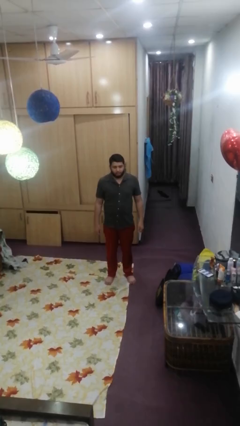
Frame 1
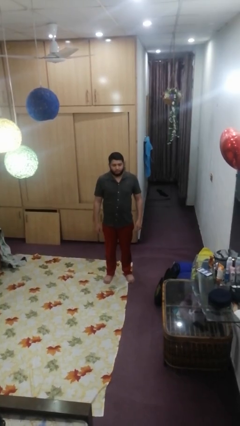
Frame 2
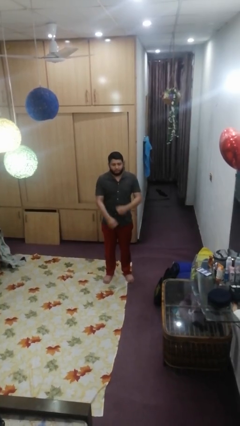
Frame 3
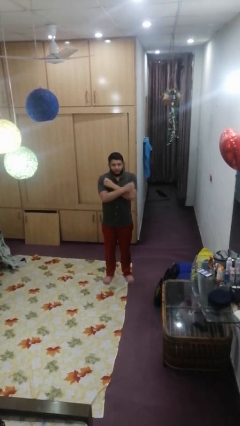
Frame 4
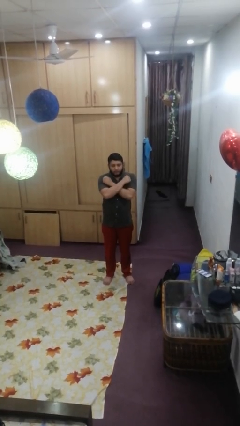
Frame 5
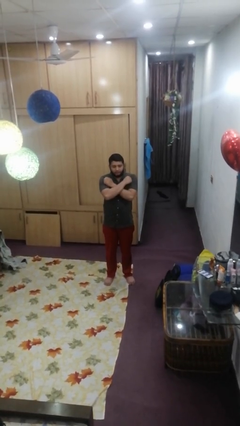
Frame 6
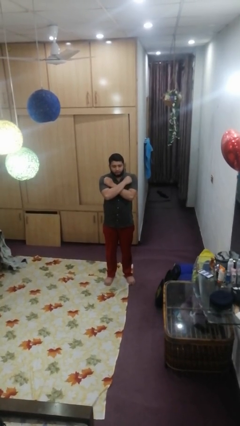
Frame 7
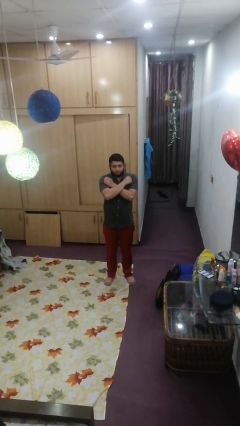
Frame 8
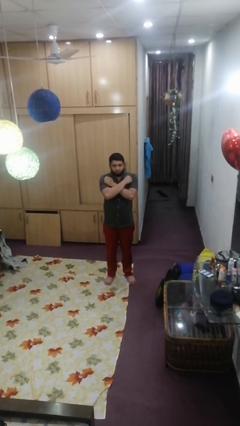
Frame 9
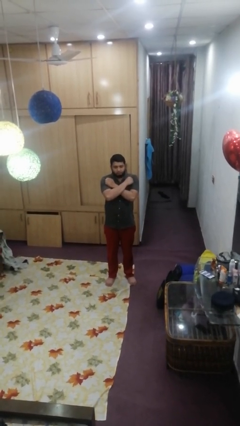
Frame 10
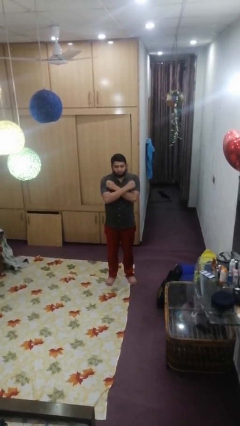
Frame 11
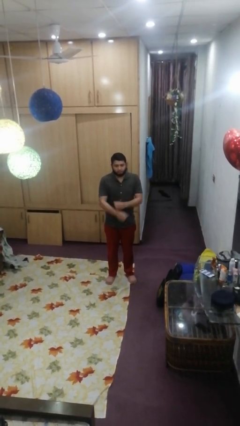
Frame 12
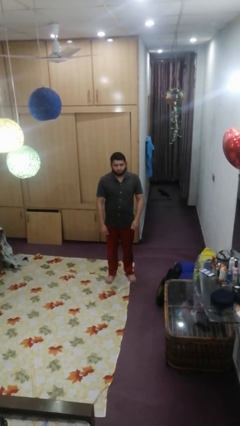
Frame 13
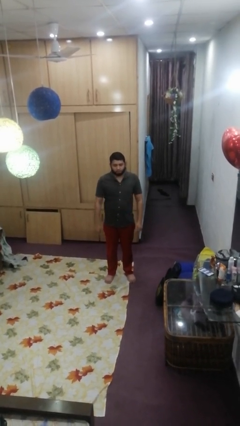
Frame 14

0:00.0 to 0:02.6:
person crosses arms

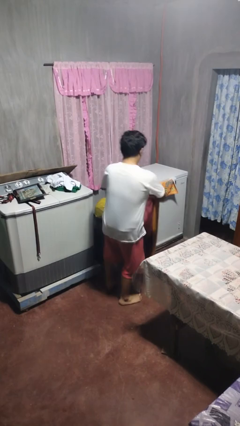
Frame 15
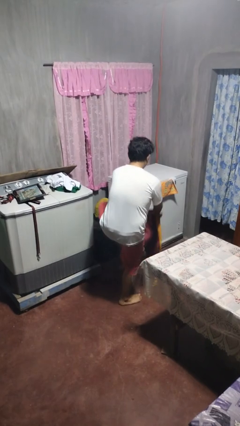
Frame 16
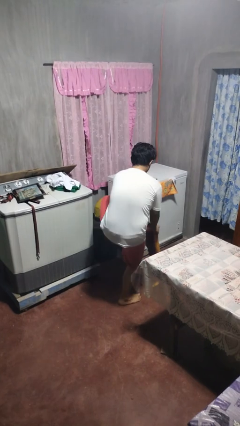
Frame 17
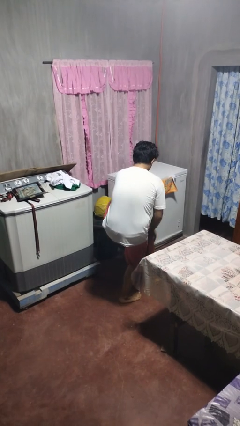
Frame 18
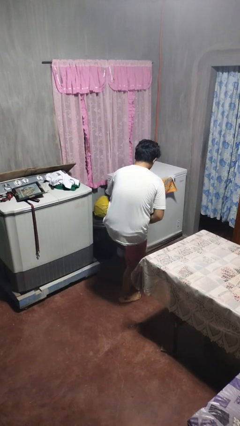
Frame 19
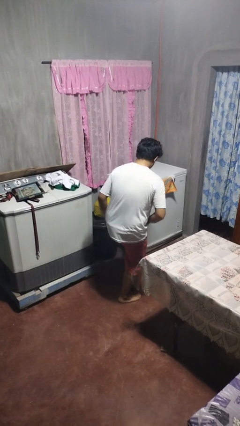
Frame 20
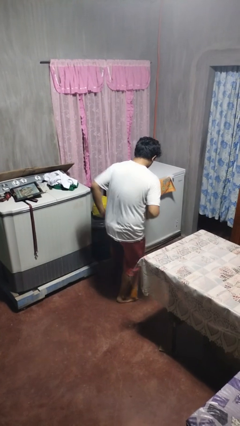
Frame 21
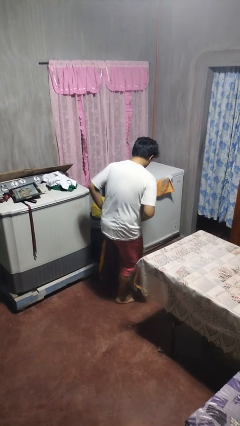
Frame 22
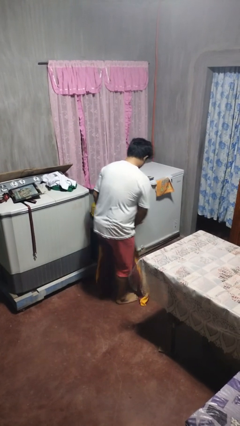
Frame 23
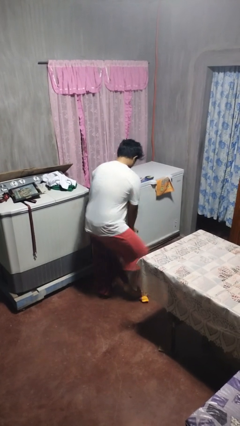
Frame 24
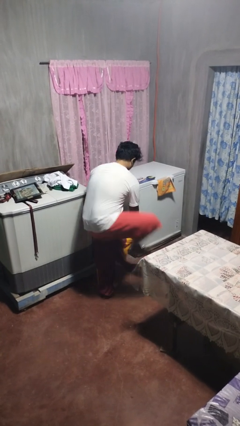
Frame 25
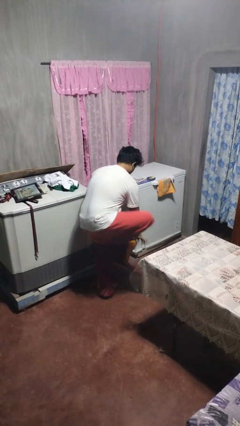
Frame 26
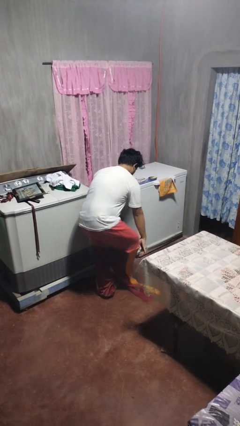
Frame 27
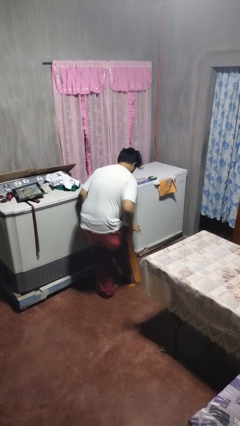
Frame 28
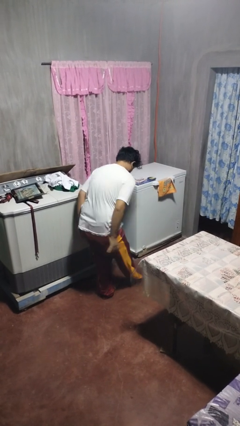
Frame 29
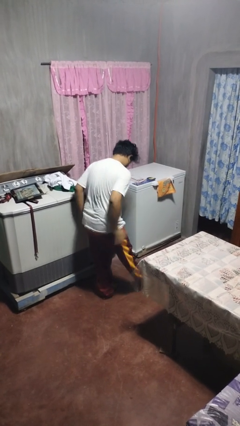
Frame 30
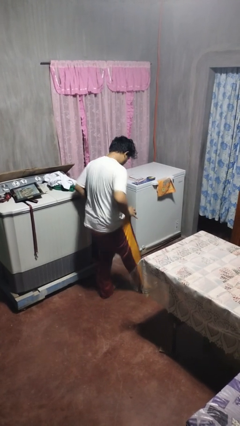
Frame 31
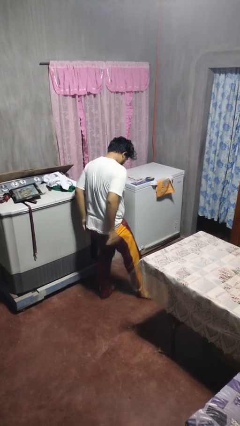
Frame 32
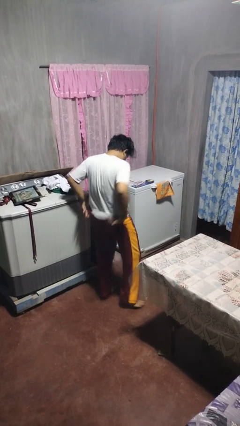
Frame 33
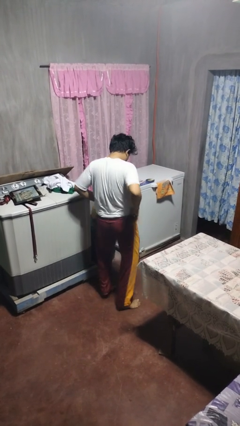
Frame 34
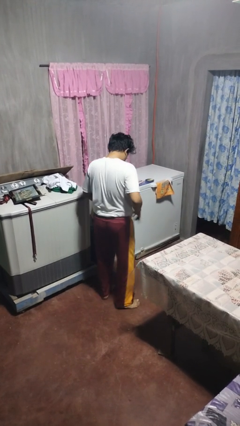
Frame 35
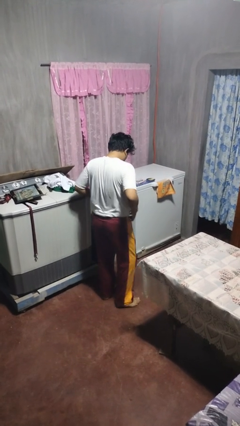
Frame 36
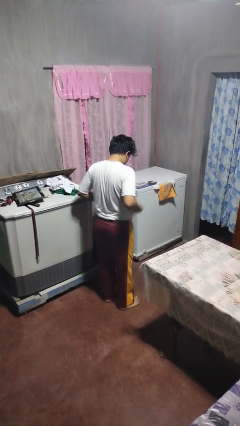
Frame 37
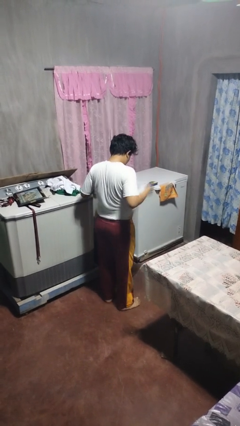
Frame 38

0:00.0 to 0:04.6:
person puts on pants

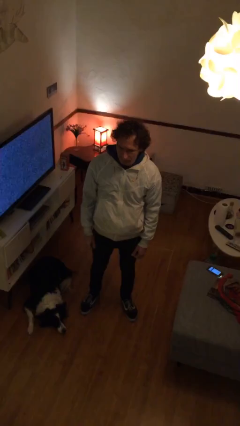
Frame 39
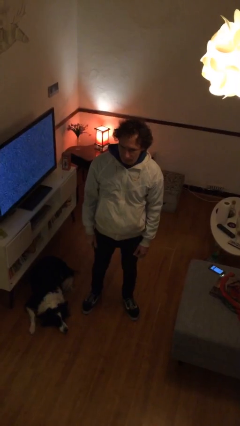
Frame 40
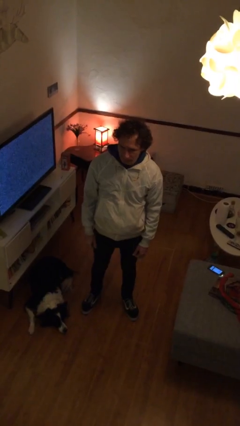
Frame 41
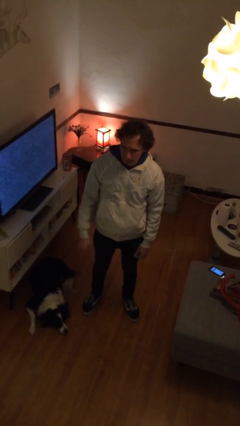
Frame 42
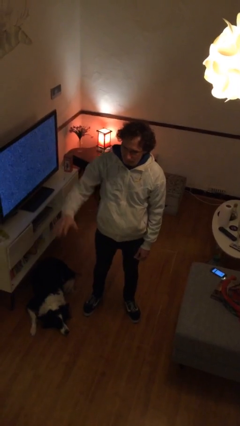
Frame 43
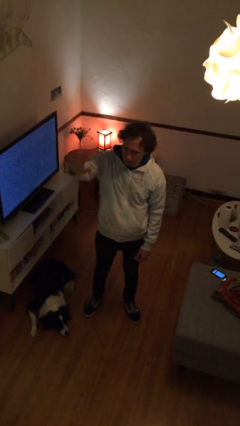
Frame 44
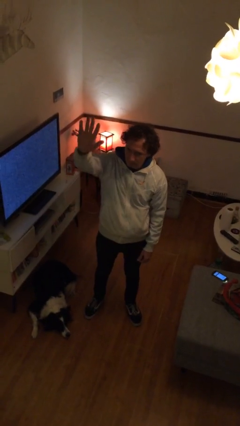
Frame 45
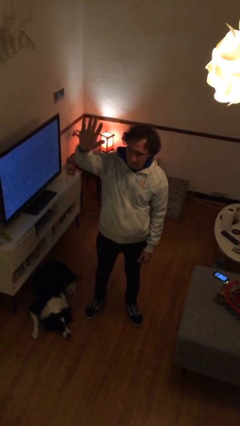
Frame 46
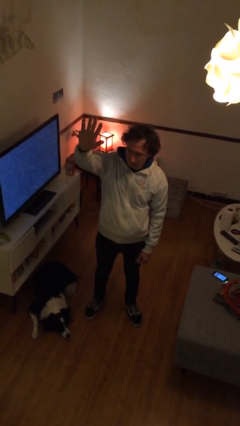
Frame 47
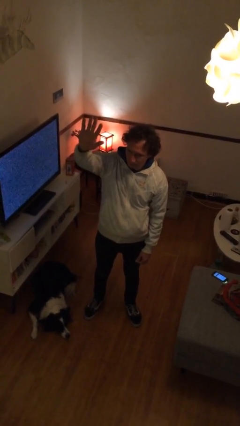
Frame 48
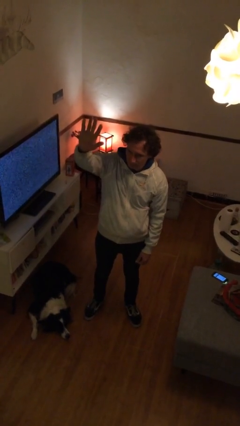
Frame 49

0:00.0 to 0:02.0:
person gestures raise hand

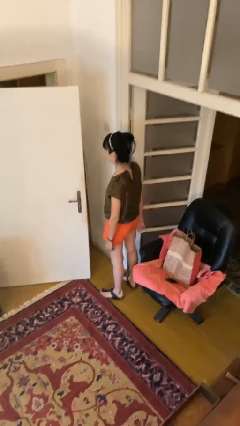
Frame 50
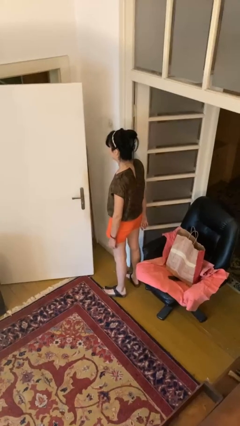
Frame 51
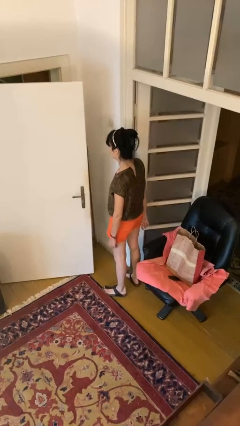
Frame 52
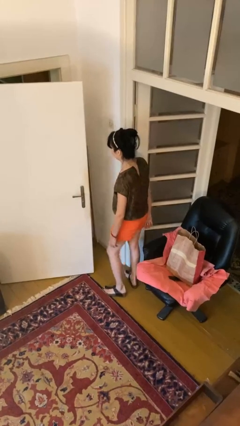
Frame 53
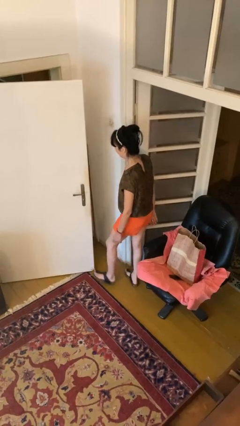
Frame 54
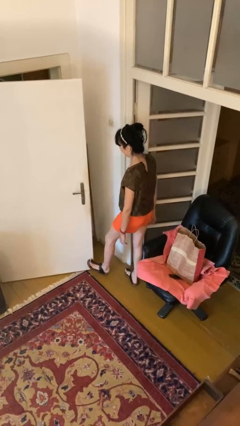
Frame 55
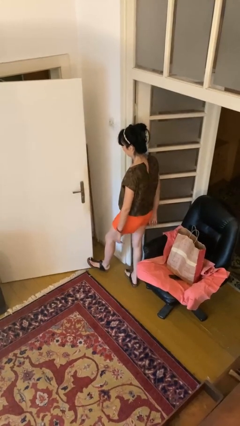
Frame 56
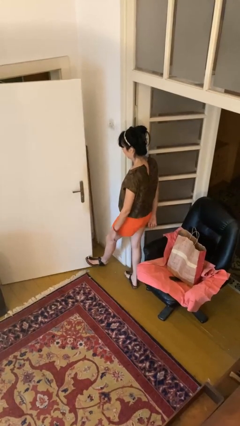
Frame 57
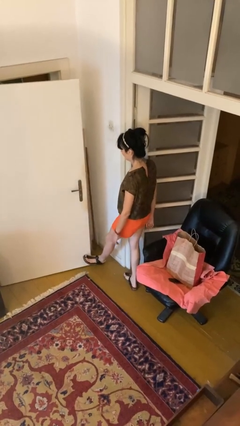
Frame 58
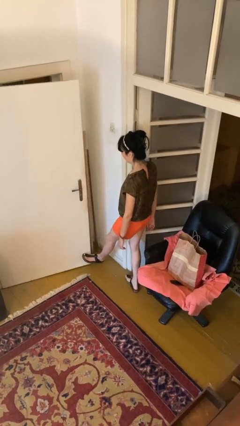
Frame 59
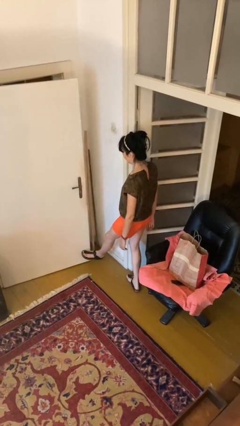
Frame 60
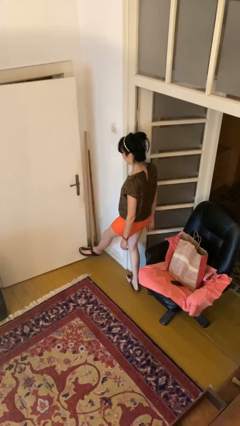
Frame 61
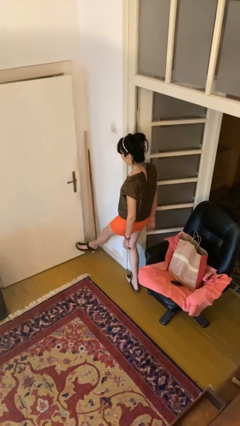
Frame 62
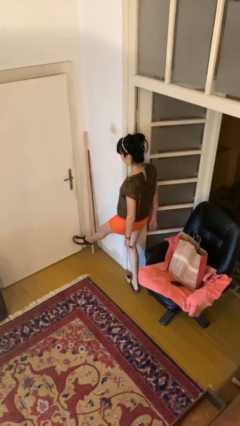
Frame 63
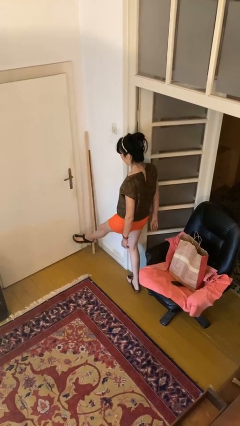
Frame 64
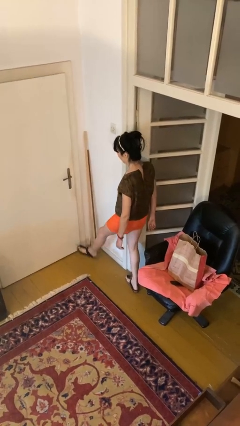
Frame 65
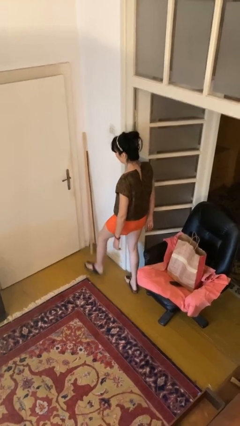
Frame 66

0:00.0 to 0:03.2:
person closes door with foot

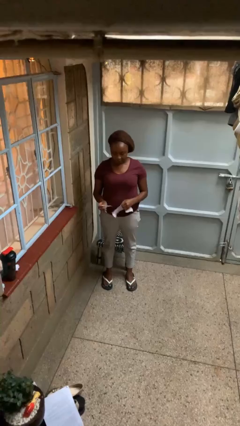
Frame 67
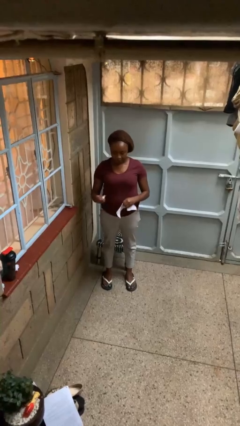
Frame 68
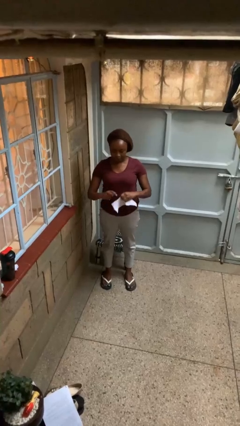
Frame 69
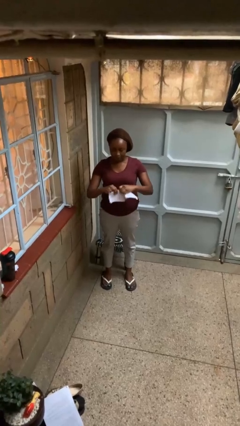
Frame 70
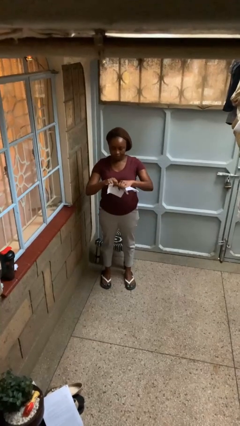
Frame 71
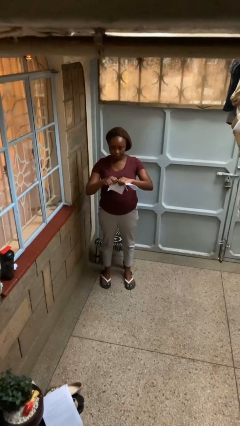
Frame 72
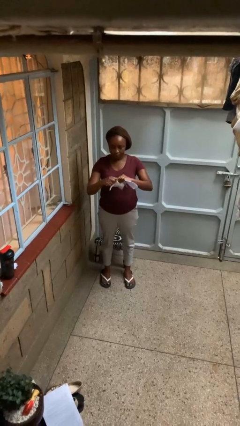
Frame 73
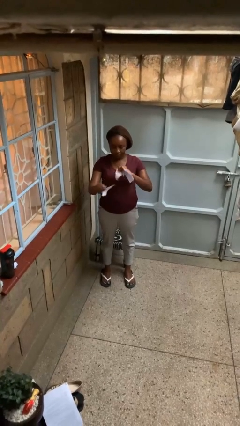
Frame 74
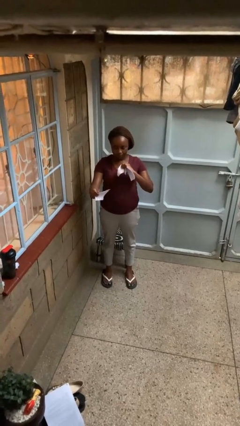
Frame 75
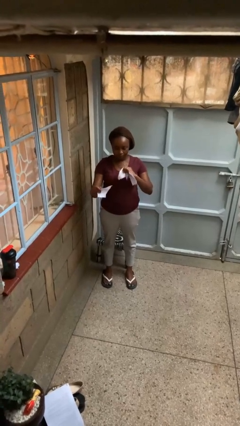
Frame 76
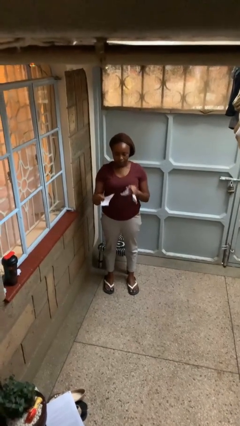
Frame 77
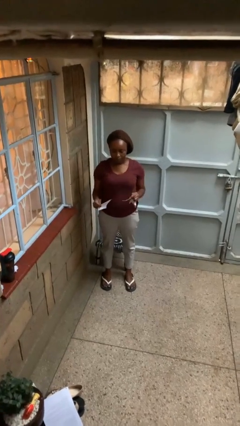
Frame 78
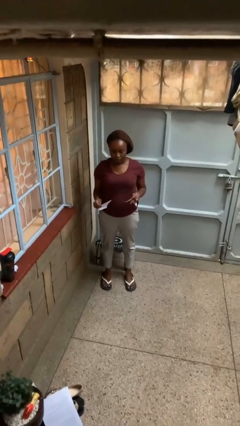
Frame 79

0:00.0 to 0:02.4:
person tears paper

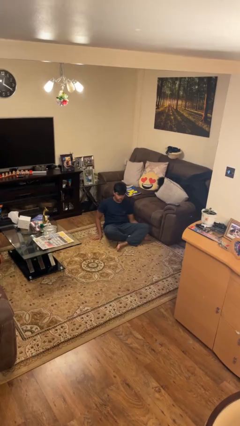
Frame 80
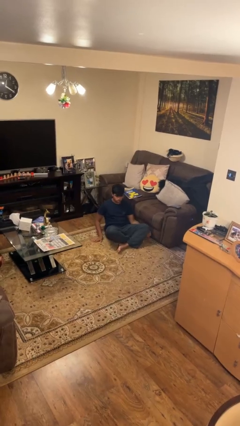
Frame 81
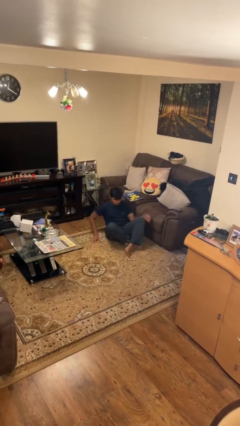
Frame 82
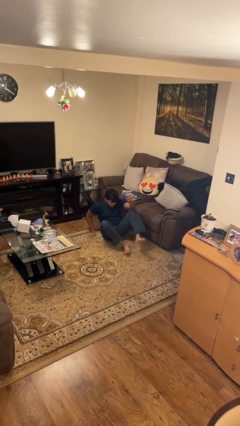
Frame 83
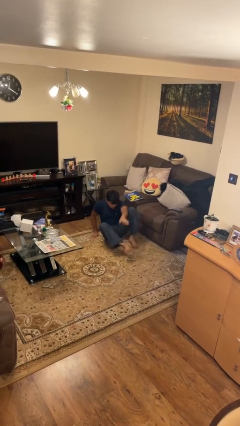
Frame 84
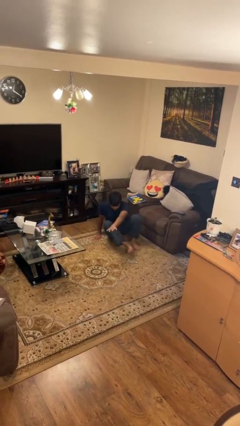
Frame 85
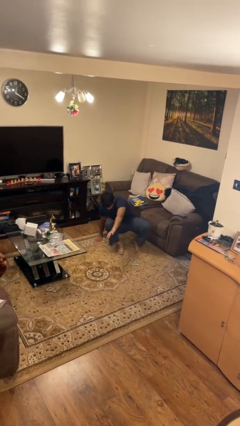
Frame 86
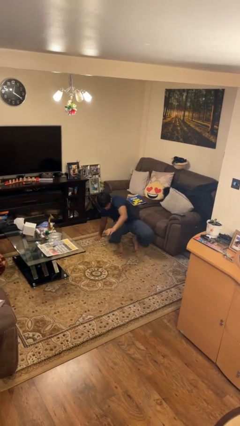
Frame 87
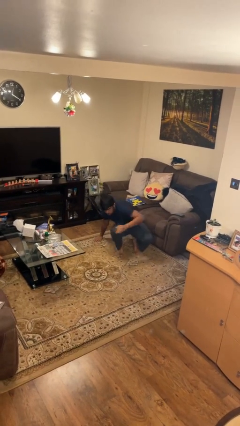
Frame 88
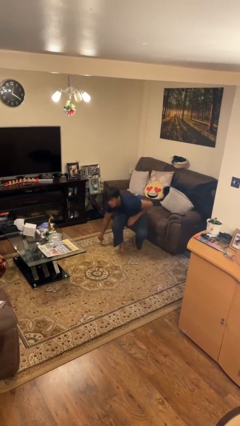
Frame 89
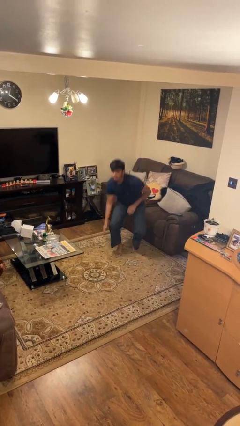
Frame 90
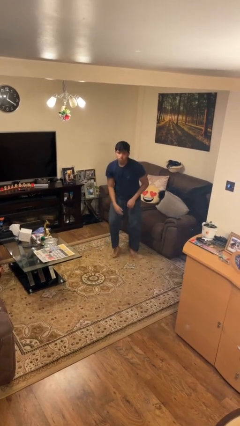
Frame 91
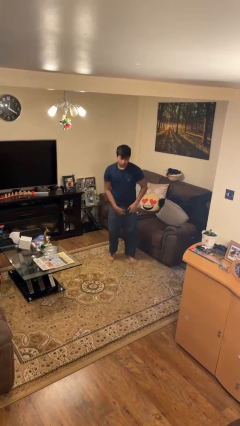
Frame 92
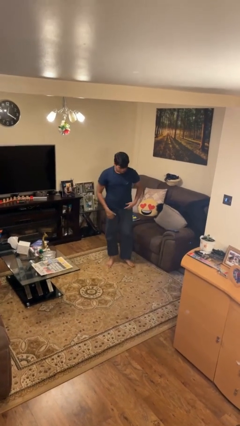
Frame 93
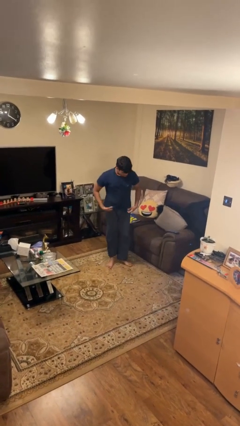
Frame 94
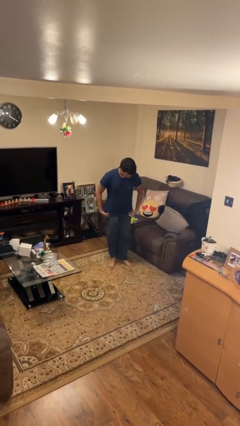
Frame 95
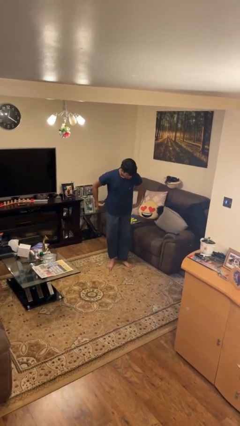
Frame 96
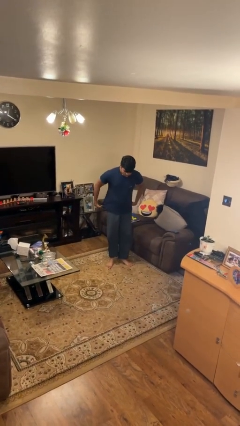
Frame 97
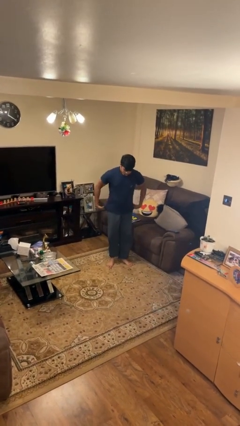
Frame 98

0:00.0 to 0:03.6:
person stands up from floor
